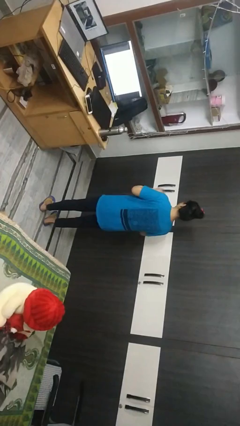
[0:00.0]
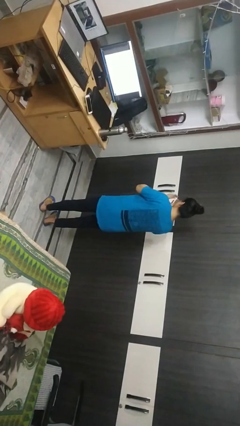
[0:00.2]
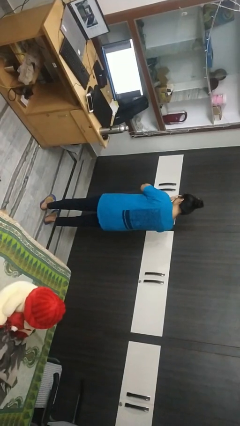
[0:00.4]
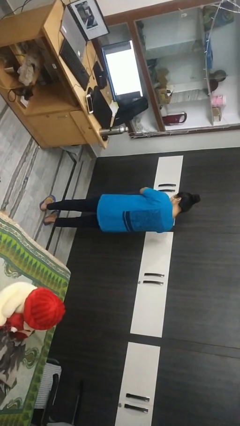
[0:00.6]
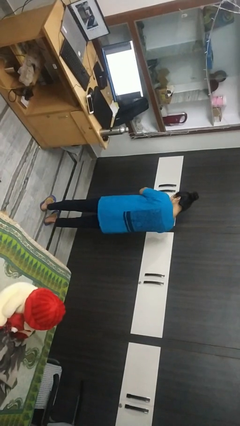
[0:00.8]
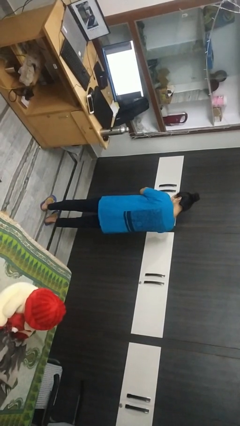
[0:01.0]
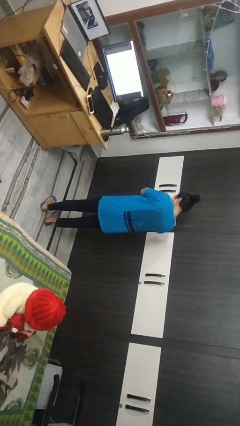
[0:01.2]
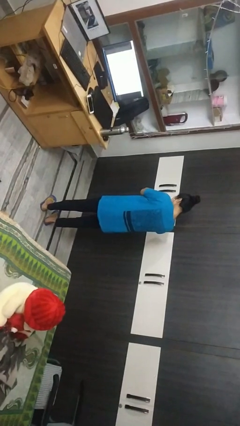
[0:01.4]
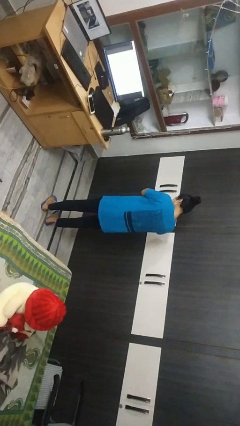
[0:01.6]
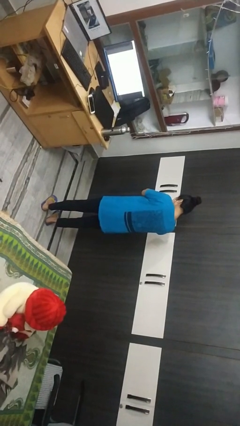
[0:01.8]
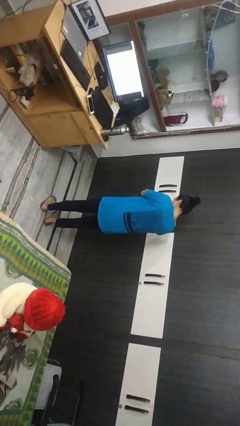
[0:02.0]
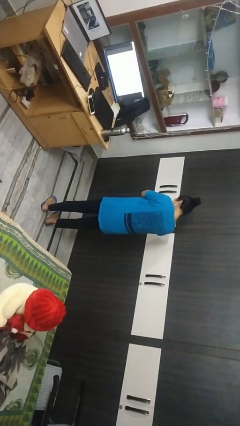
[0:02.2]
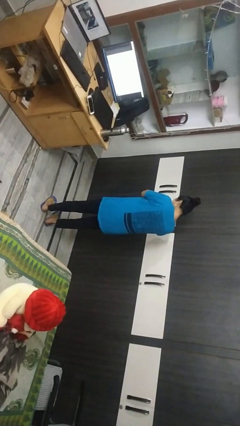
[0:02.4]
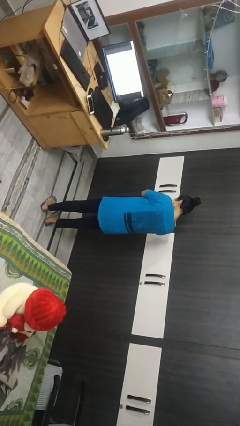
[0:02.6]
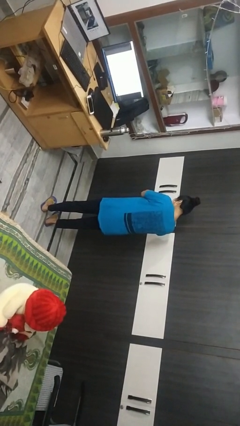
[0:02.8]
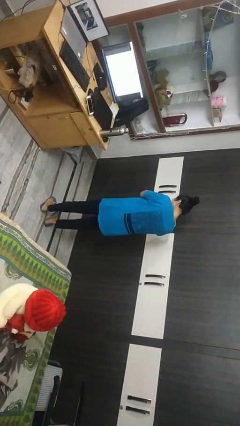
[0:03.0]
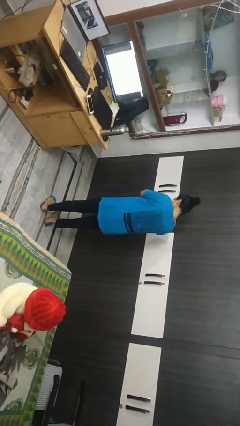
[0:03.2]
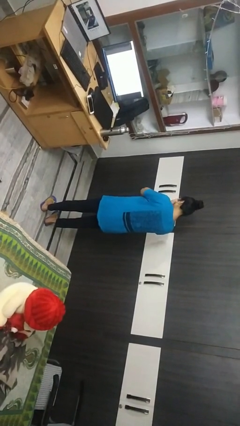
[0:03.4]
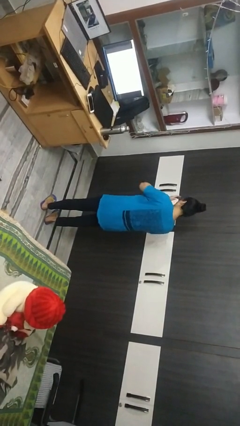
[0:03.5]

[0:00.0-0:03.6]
person covers face with hands

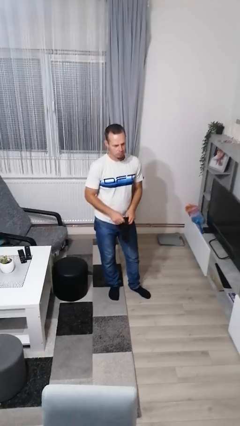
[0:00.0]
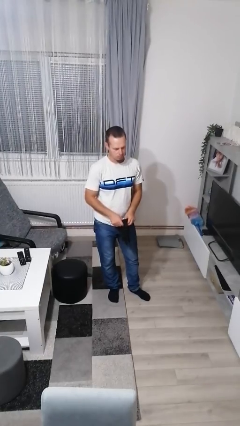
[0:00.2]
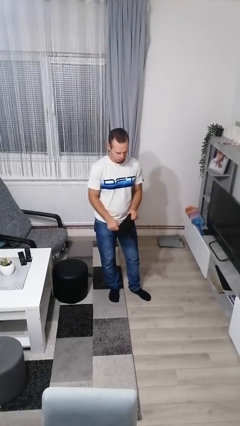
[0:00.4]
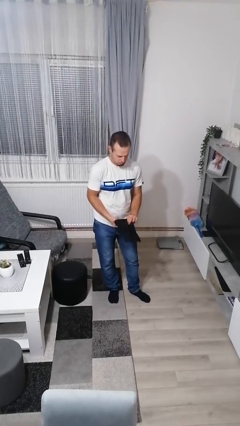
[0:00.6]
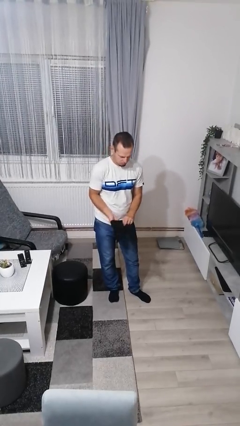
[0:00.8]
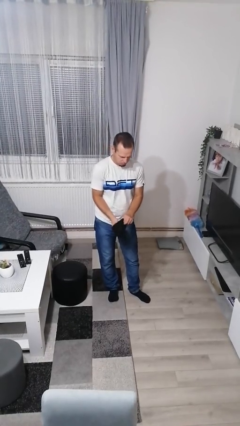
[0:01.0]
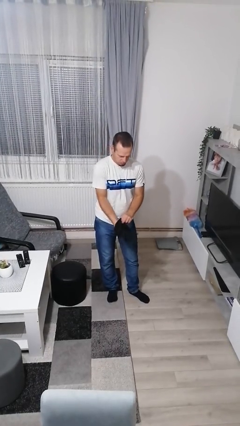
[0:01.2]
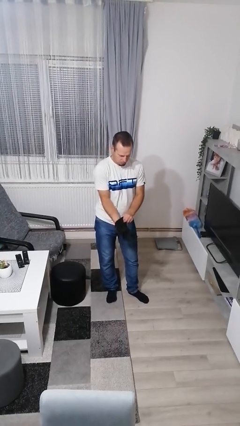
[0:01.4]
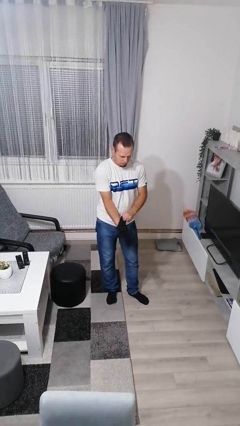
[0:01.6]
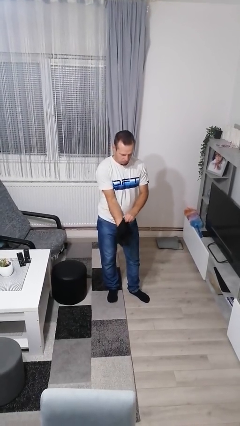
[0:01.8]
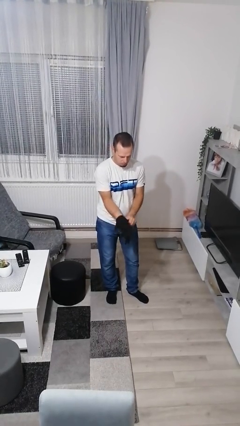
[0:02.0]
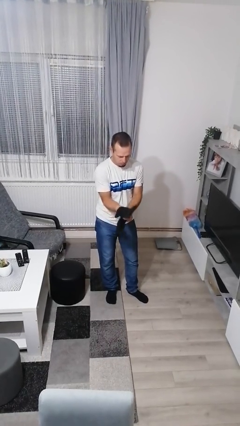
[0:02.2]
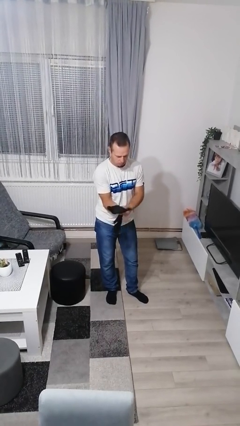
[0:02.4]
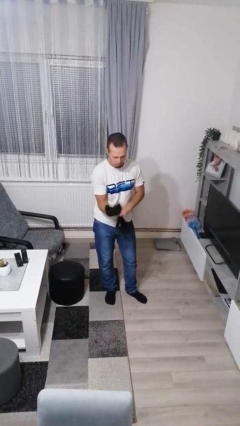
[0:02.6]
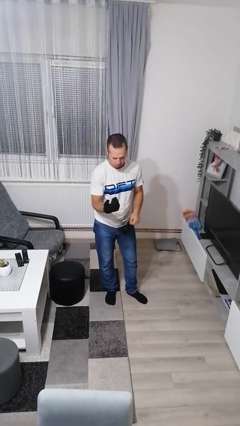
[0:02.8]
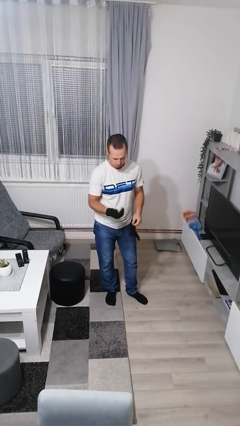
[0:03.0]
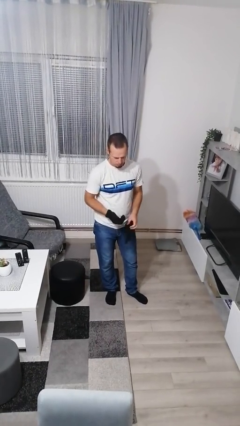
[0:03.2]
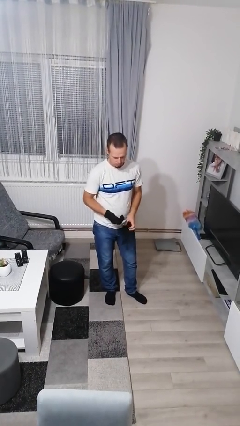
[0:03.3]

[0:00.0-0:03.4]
person puts on gloves

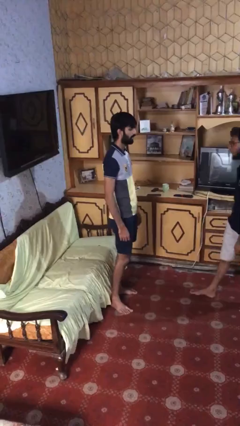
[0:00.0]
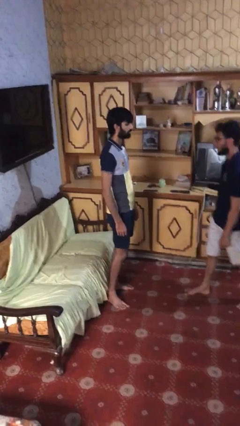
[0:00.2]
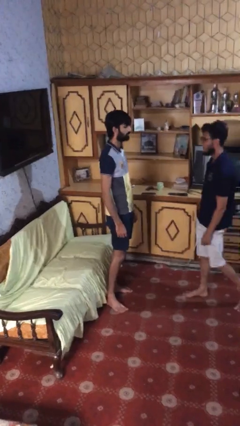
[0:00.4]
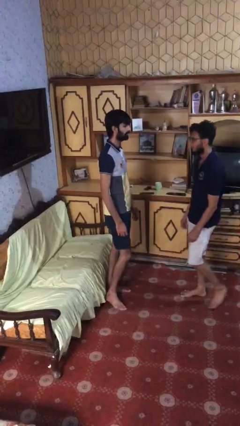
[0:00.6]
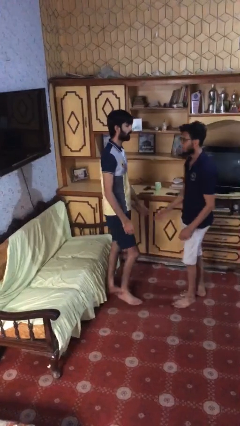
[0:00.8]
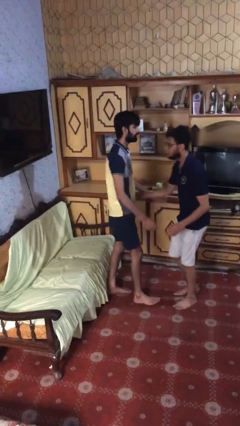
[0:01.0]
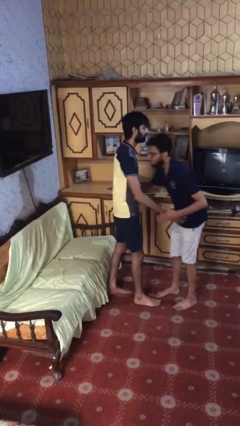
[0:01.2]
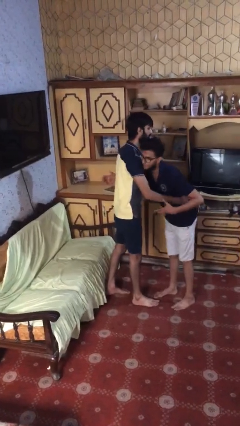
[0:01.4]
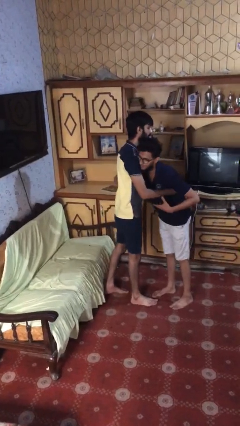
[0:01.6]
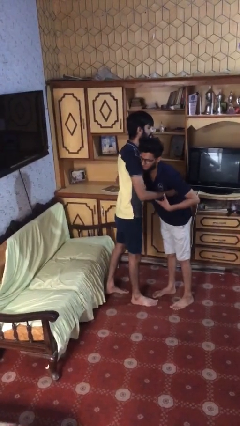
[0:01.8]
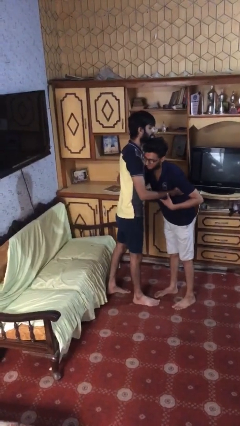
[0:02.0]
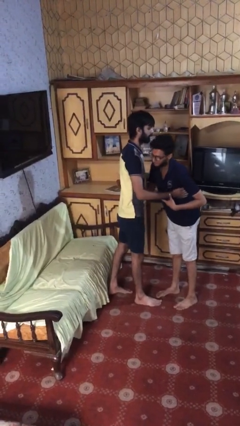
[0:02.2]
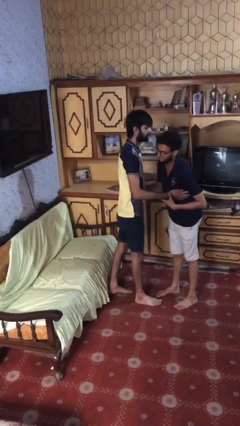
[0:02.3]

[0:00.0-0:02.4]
person embraces person

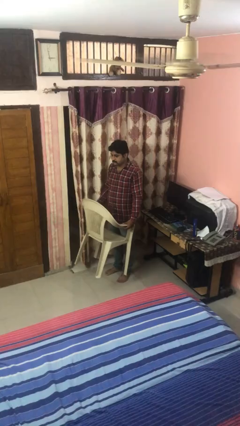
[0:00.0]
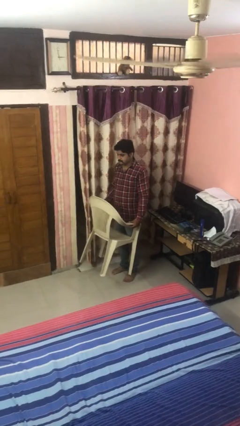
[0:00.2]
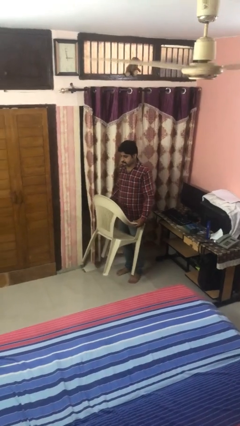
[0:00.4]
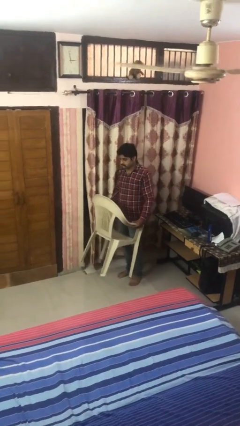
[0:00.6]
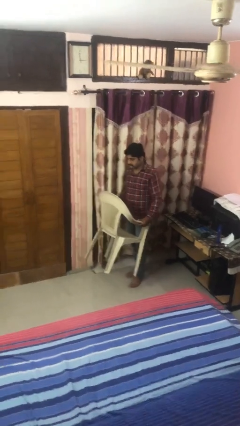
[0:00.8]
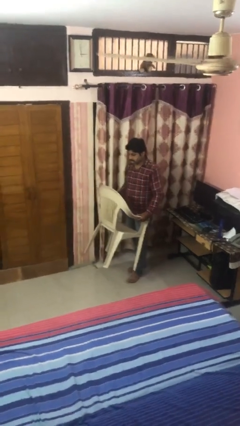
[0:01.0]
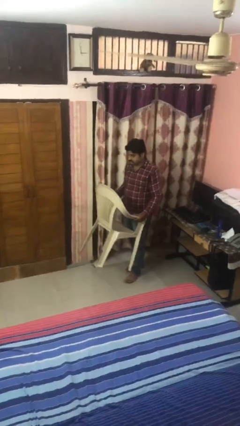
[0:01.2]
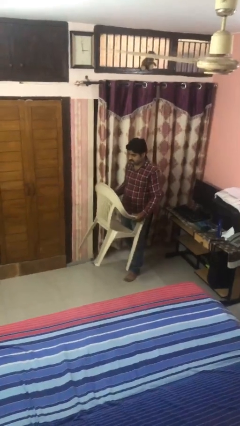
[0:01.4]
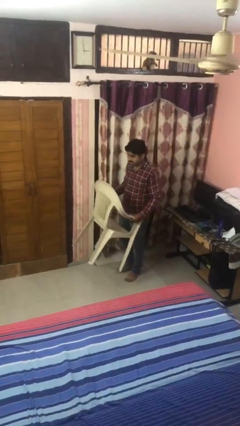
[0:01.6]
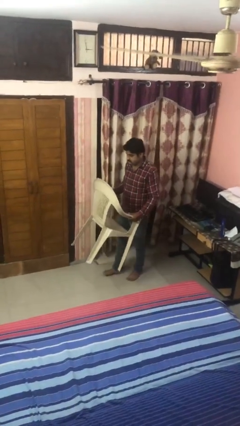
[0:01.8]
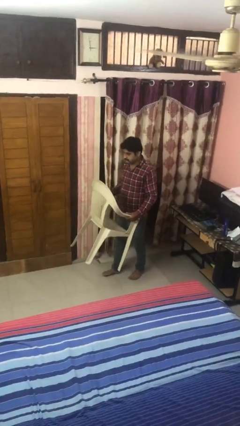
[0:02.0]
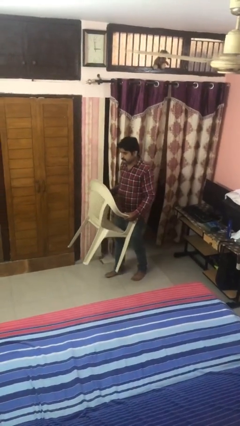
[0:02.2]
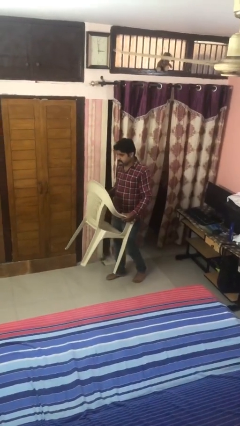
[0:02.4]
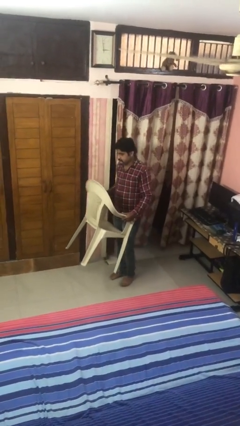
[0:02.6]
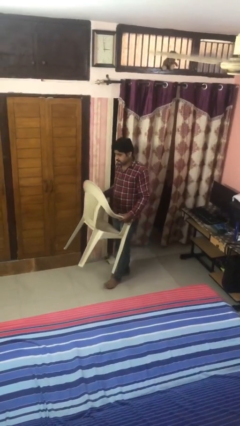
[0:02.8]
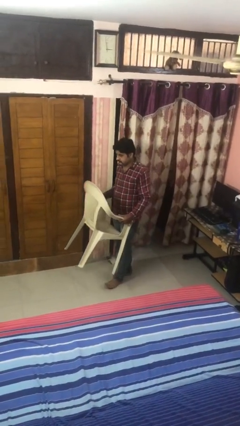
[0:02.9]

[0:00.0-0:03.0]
person carries furniture

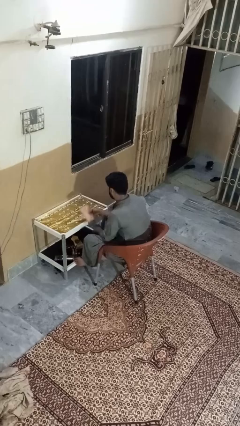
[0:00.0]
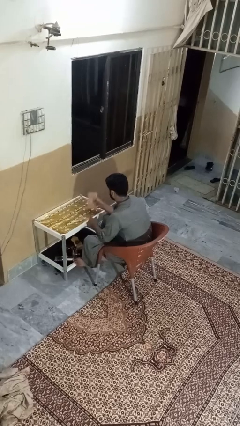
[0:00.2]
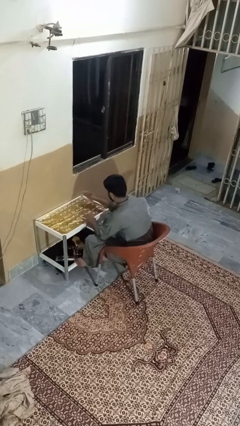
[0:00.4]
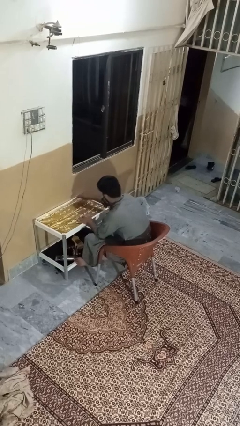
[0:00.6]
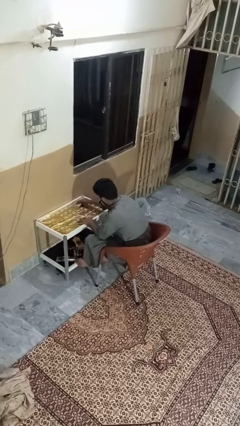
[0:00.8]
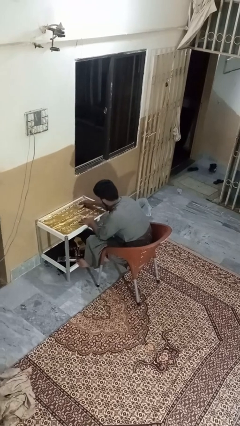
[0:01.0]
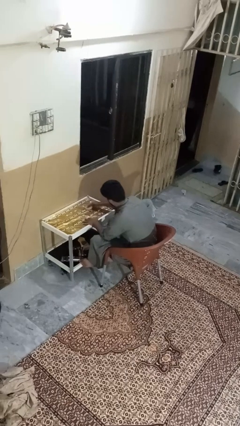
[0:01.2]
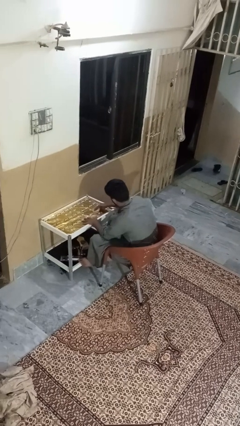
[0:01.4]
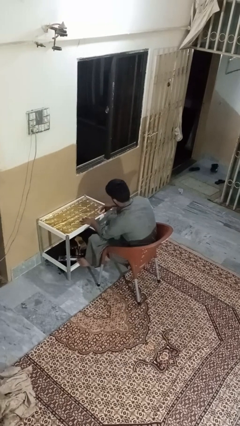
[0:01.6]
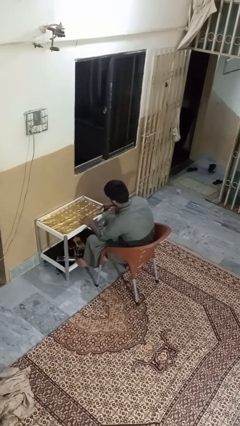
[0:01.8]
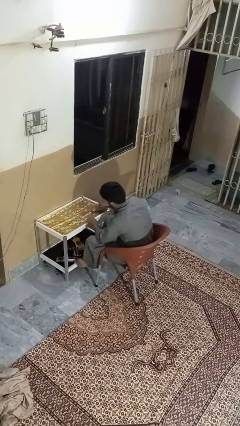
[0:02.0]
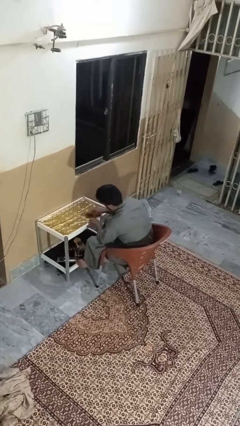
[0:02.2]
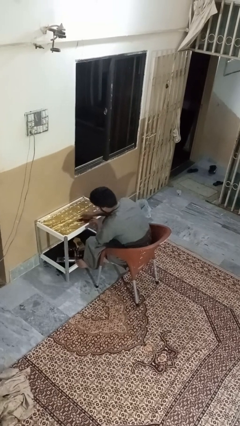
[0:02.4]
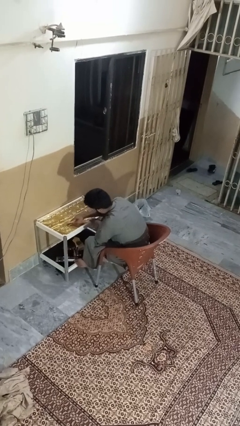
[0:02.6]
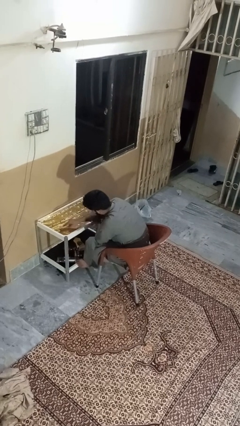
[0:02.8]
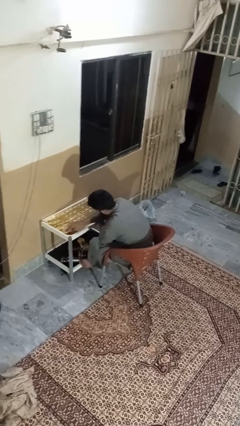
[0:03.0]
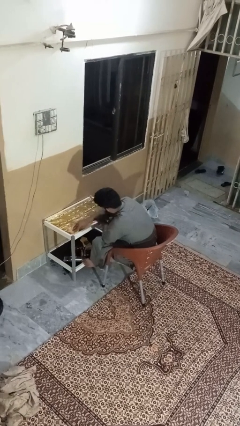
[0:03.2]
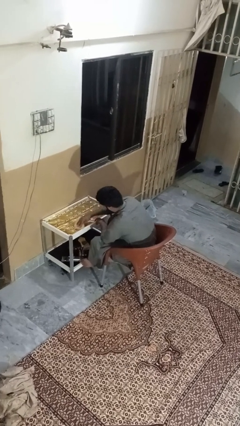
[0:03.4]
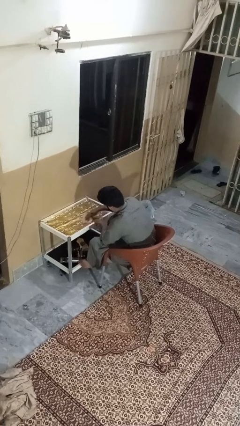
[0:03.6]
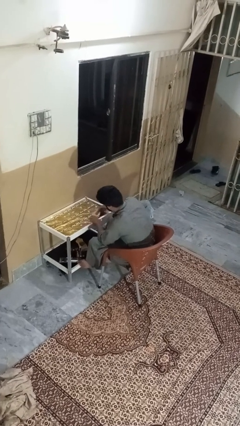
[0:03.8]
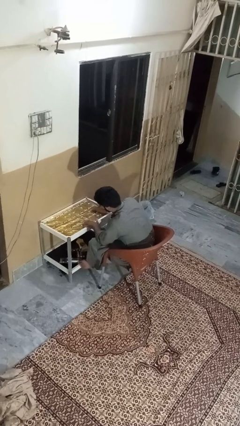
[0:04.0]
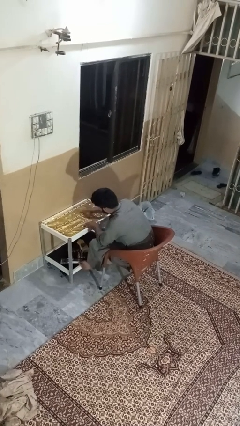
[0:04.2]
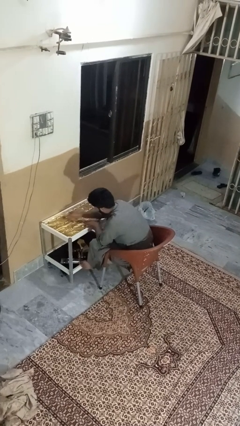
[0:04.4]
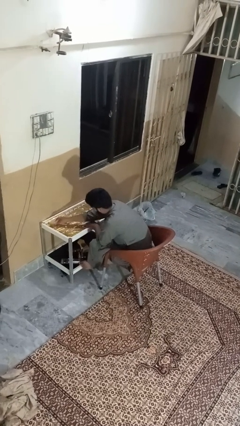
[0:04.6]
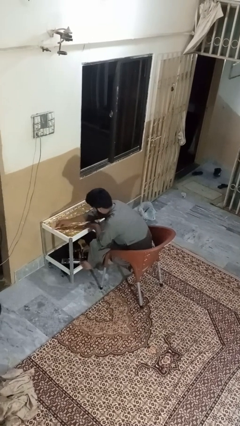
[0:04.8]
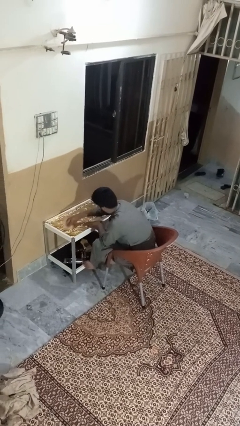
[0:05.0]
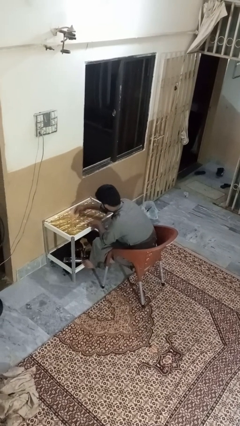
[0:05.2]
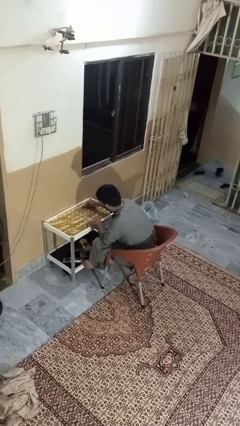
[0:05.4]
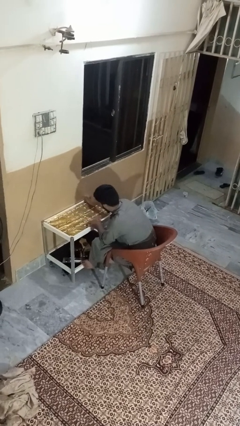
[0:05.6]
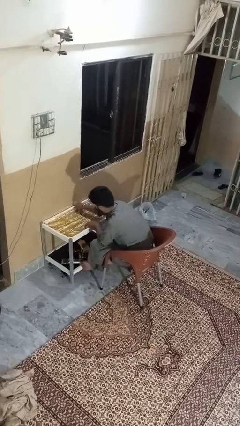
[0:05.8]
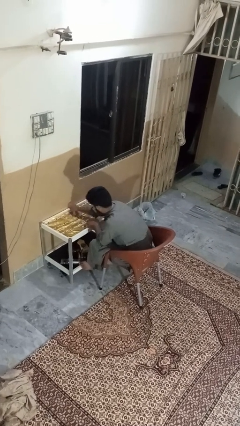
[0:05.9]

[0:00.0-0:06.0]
person cleans table with rag
